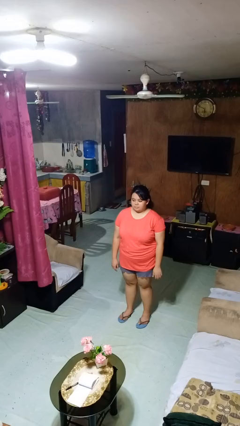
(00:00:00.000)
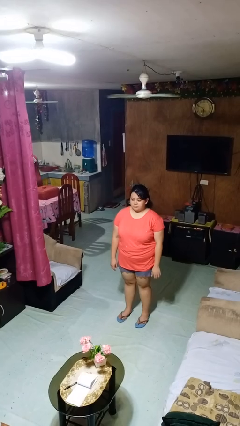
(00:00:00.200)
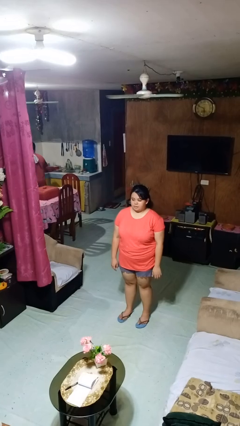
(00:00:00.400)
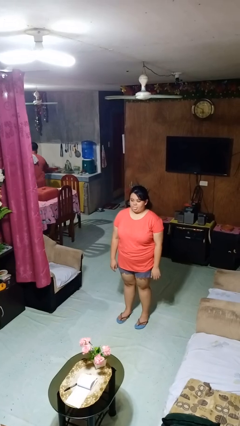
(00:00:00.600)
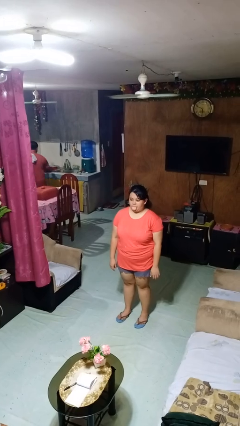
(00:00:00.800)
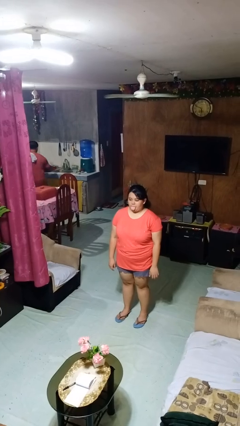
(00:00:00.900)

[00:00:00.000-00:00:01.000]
person sticks out tongue

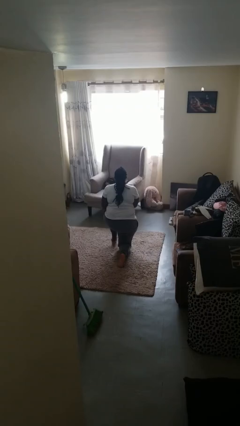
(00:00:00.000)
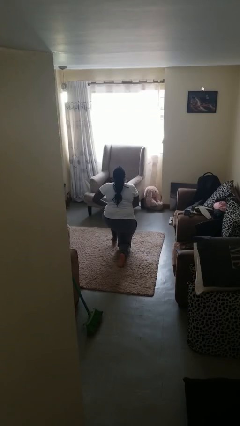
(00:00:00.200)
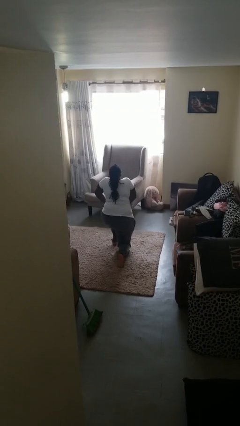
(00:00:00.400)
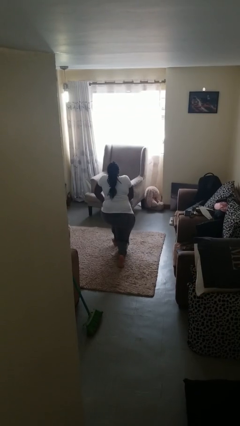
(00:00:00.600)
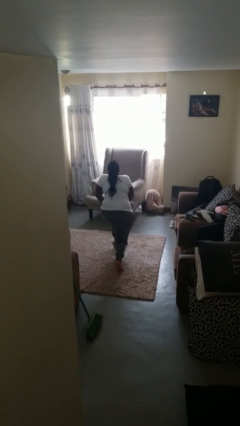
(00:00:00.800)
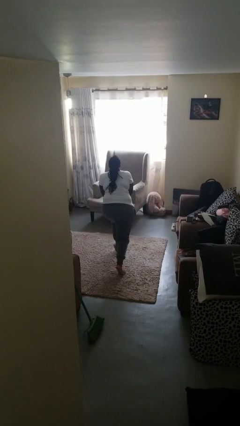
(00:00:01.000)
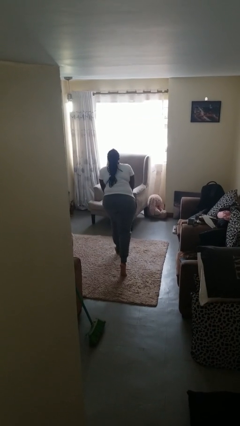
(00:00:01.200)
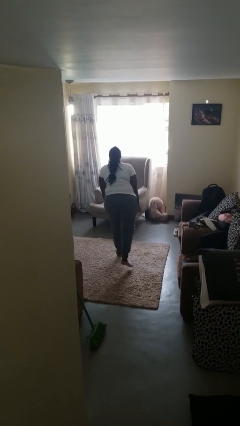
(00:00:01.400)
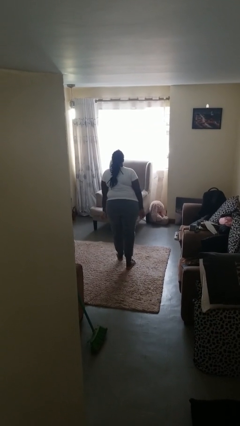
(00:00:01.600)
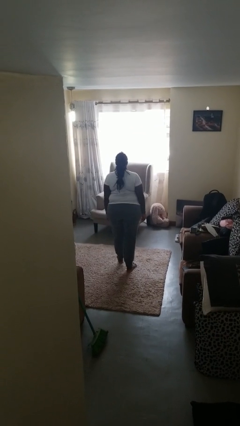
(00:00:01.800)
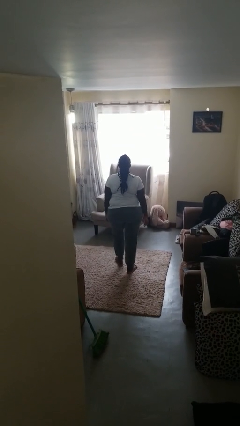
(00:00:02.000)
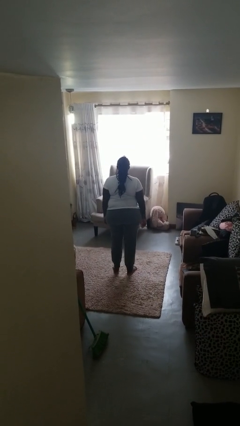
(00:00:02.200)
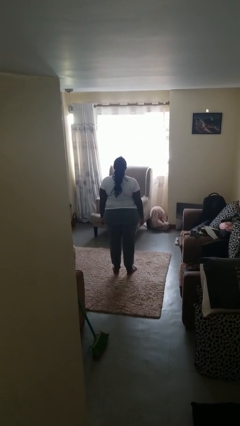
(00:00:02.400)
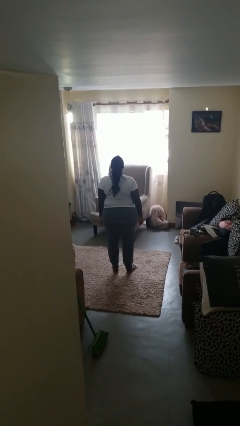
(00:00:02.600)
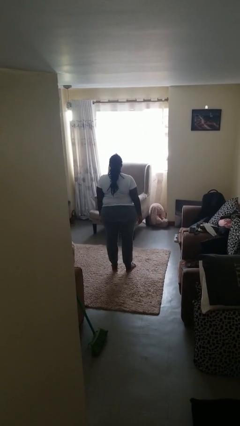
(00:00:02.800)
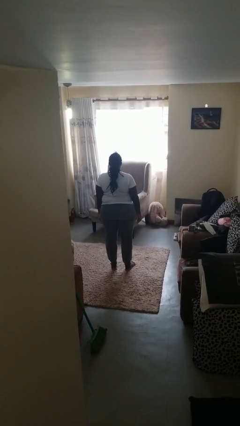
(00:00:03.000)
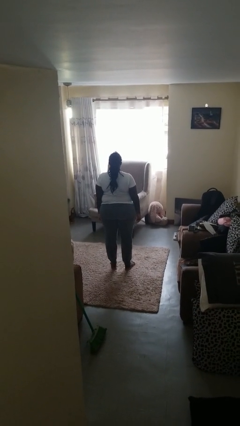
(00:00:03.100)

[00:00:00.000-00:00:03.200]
person stands up from floor

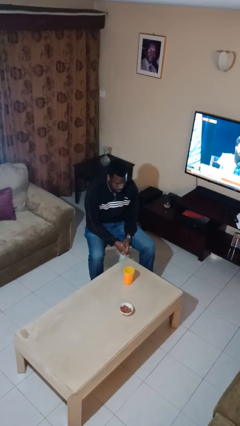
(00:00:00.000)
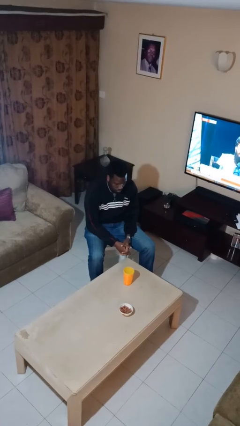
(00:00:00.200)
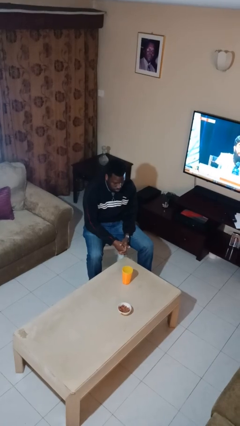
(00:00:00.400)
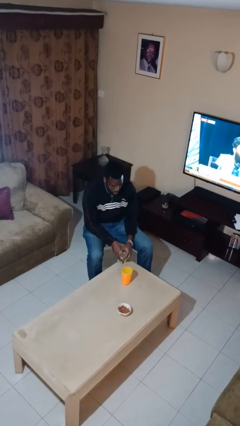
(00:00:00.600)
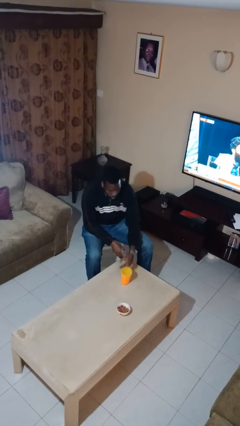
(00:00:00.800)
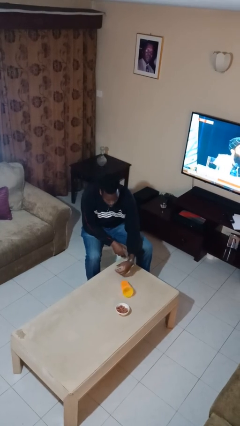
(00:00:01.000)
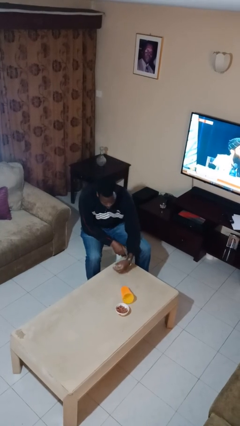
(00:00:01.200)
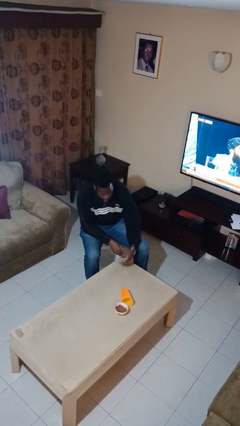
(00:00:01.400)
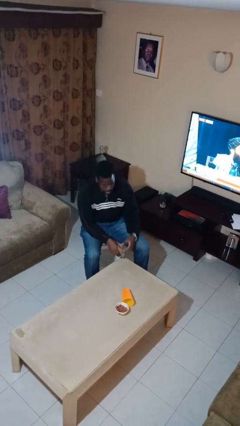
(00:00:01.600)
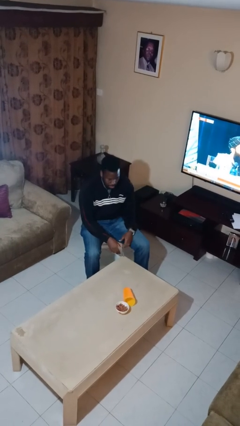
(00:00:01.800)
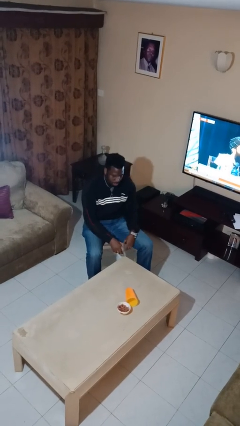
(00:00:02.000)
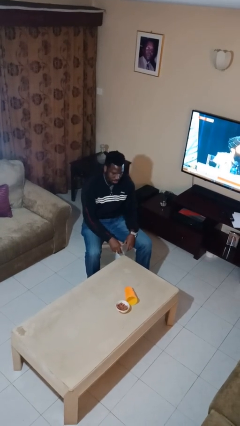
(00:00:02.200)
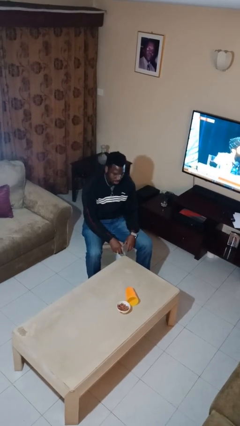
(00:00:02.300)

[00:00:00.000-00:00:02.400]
person knocks over glass

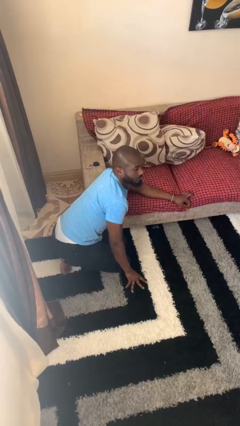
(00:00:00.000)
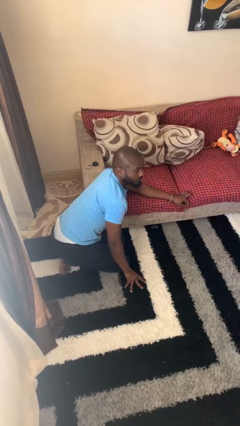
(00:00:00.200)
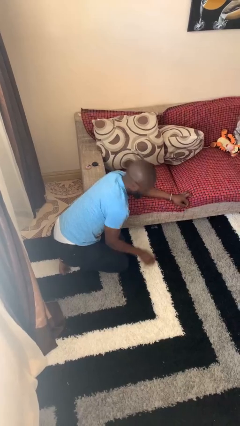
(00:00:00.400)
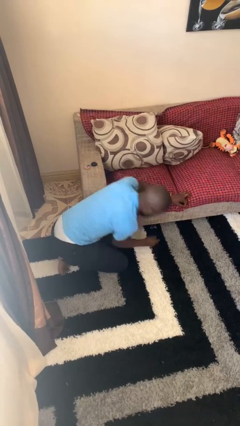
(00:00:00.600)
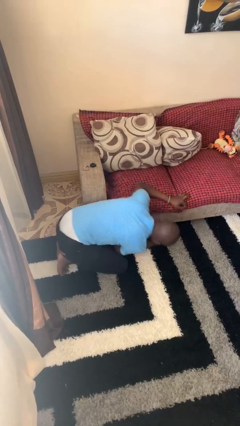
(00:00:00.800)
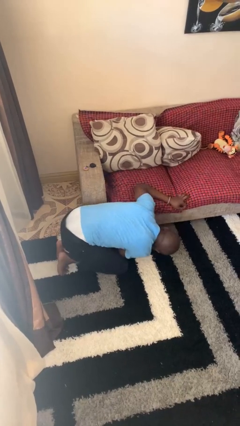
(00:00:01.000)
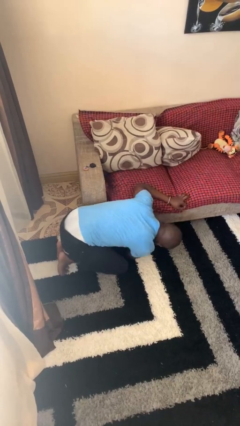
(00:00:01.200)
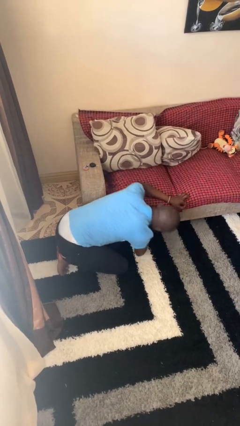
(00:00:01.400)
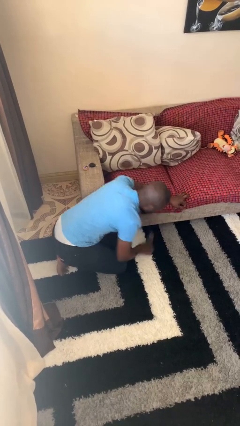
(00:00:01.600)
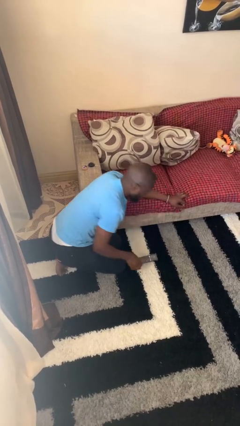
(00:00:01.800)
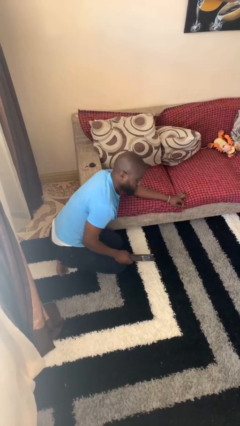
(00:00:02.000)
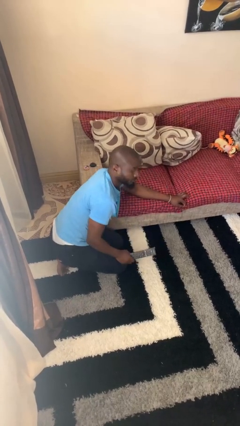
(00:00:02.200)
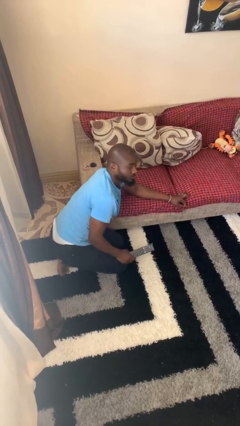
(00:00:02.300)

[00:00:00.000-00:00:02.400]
person searches under couch

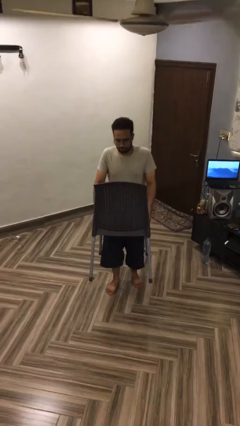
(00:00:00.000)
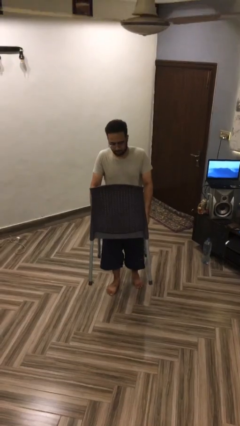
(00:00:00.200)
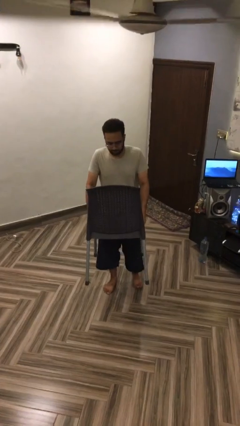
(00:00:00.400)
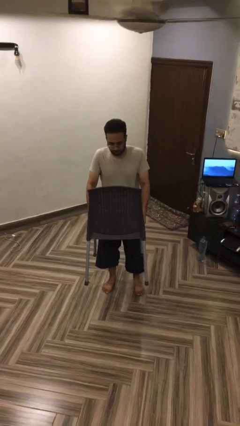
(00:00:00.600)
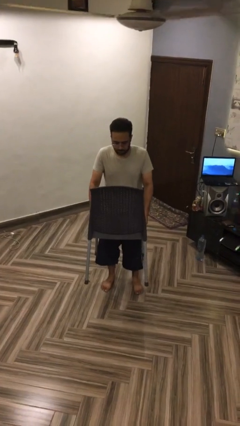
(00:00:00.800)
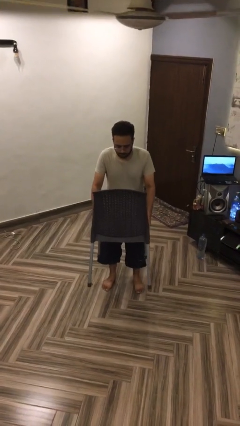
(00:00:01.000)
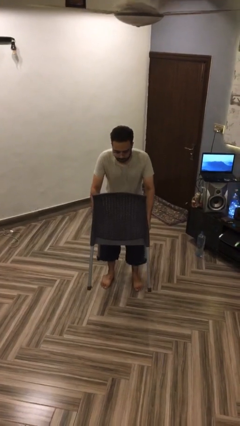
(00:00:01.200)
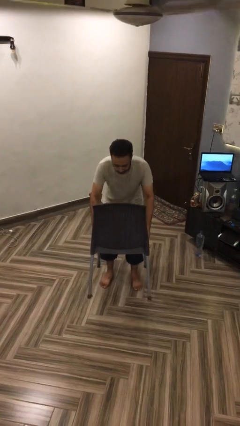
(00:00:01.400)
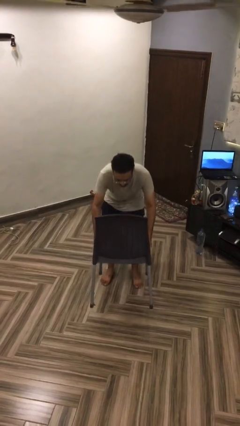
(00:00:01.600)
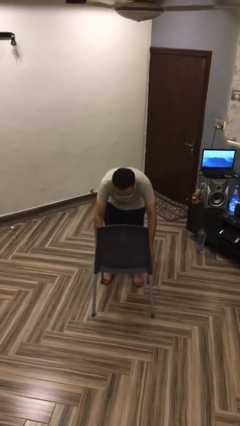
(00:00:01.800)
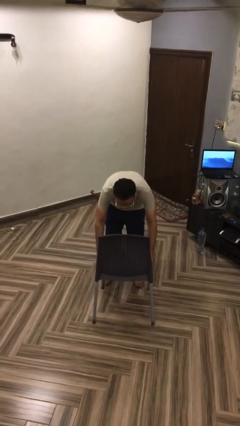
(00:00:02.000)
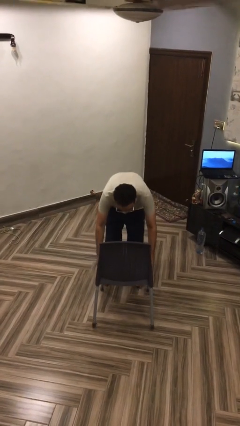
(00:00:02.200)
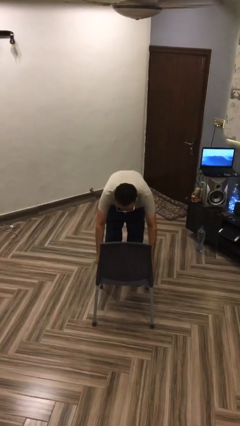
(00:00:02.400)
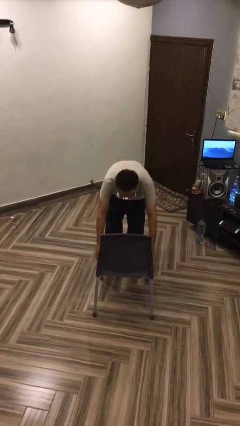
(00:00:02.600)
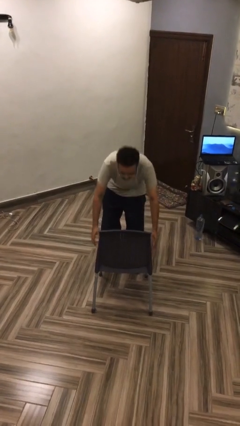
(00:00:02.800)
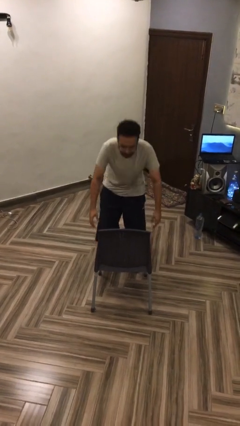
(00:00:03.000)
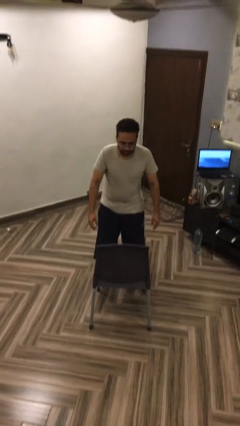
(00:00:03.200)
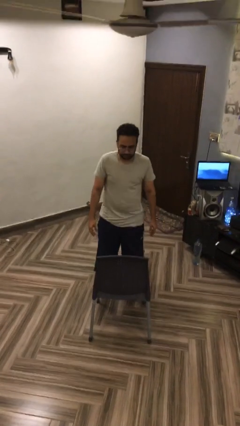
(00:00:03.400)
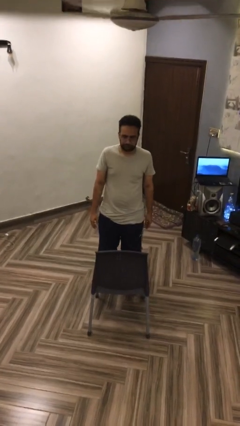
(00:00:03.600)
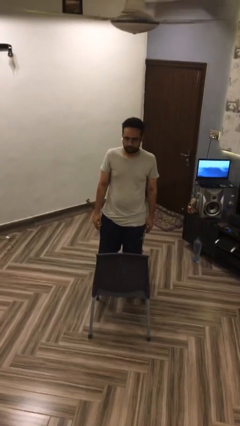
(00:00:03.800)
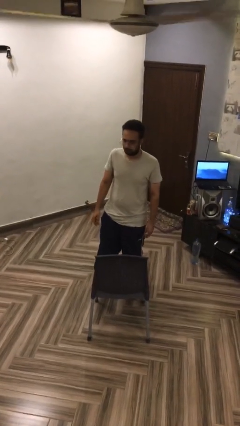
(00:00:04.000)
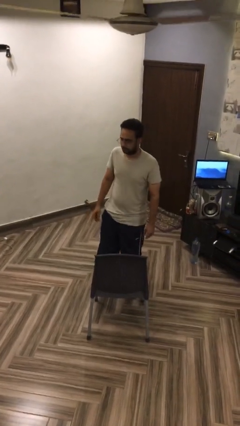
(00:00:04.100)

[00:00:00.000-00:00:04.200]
person puts down object on floor

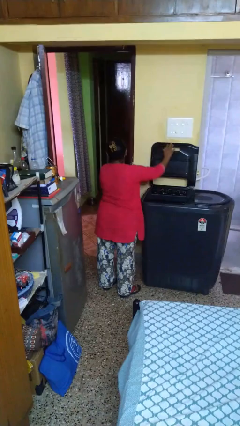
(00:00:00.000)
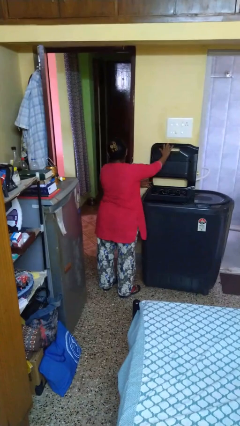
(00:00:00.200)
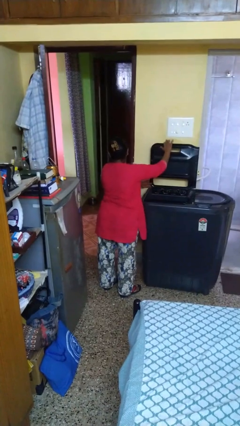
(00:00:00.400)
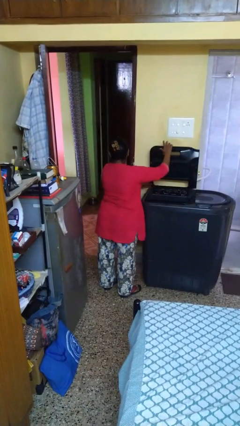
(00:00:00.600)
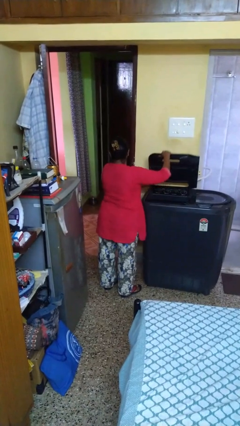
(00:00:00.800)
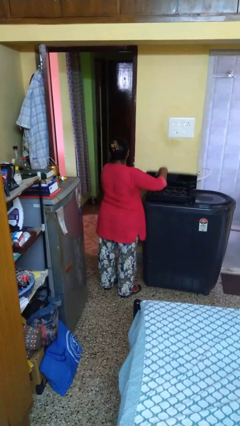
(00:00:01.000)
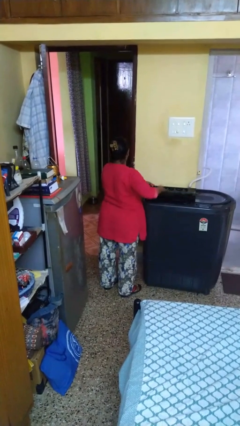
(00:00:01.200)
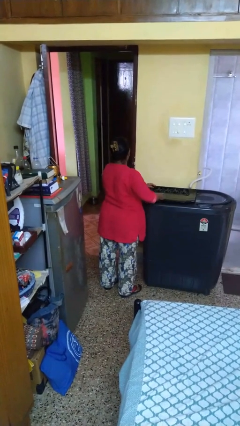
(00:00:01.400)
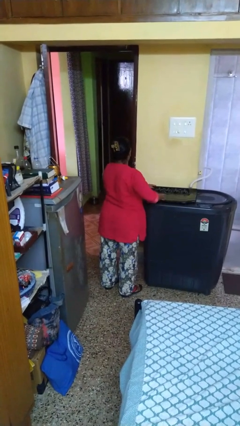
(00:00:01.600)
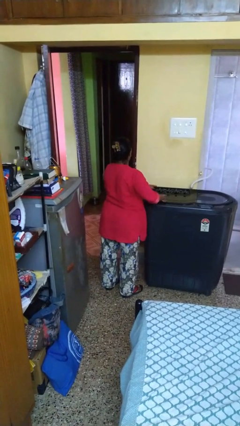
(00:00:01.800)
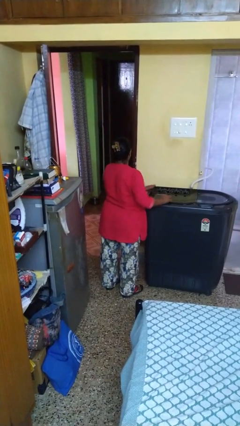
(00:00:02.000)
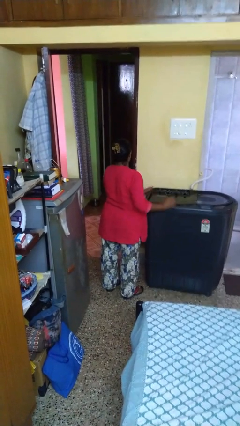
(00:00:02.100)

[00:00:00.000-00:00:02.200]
person closes clothes washer

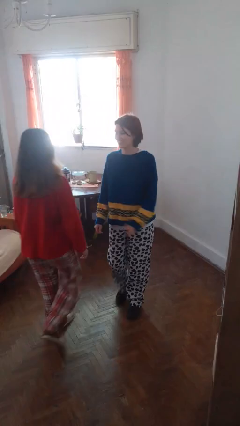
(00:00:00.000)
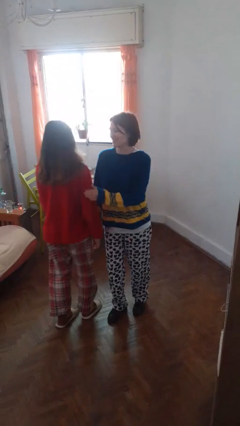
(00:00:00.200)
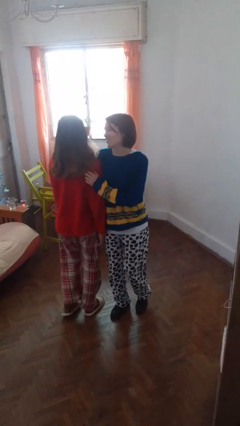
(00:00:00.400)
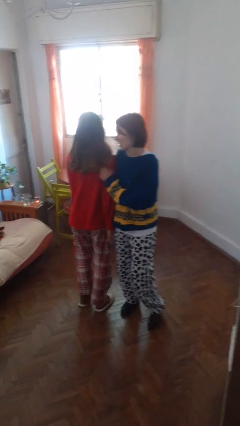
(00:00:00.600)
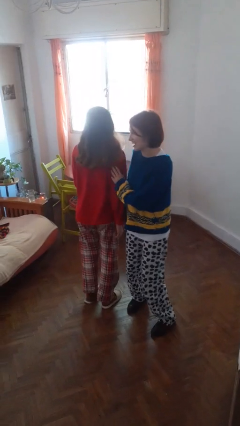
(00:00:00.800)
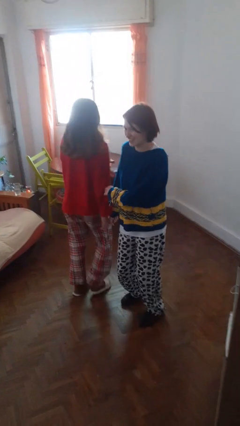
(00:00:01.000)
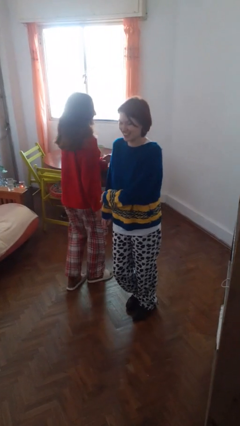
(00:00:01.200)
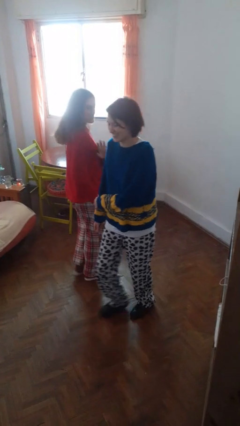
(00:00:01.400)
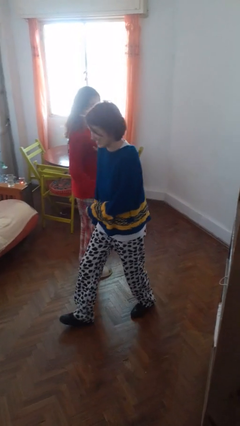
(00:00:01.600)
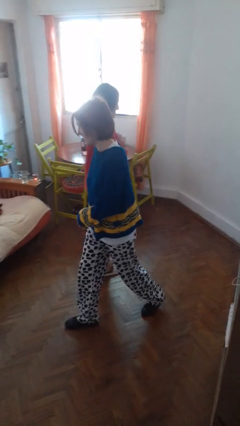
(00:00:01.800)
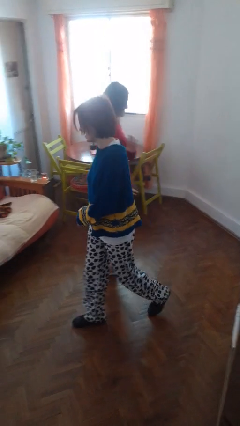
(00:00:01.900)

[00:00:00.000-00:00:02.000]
person bumps into person
